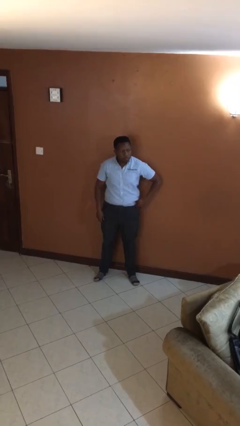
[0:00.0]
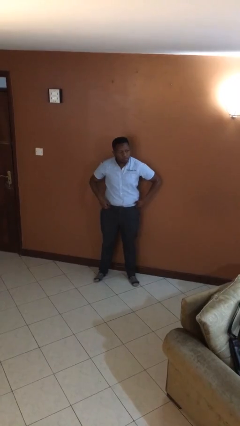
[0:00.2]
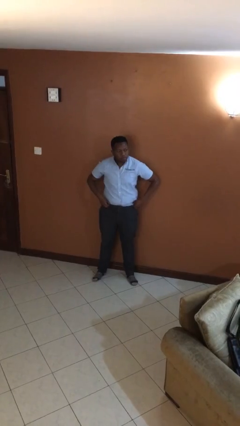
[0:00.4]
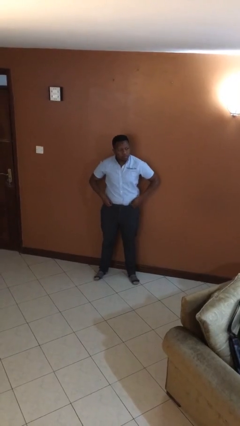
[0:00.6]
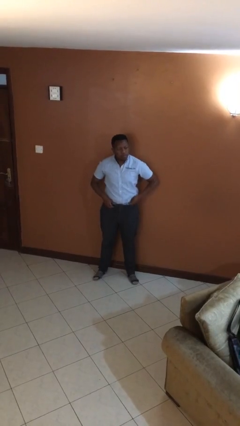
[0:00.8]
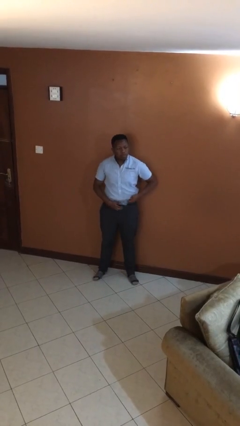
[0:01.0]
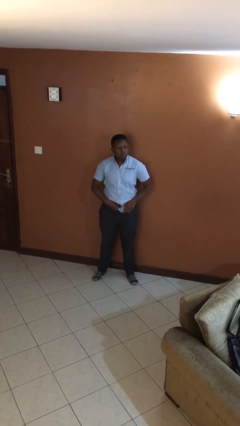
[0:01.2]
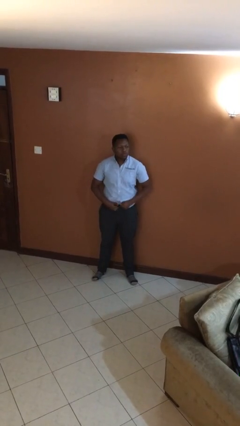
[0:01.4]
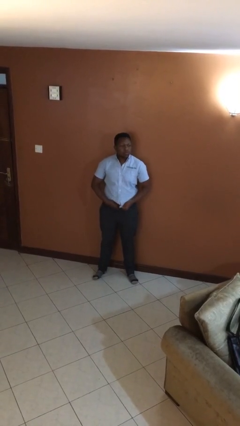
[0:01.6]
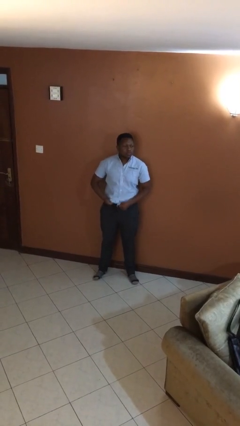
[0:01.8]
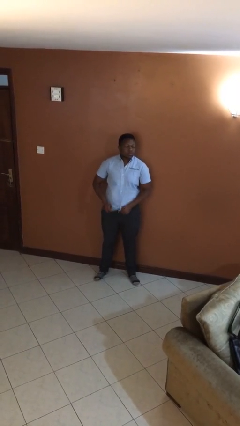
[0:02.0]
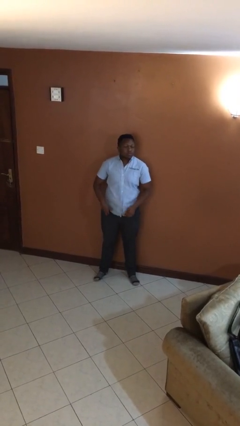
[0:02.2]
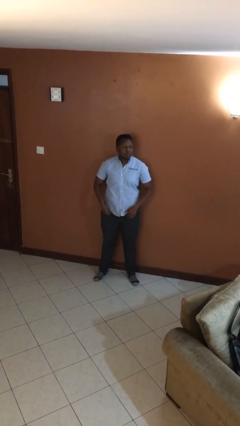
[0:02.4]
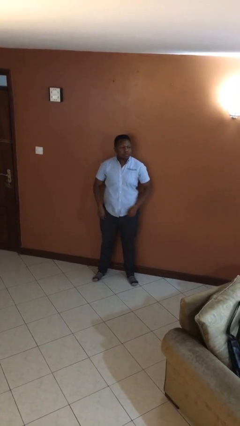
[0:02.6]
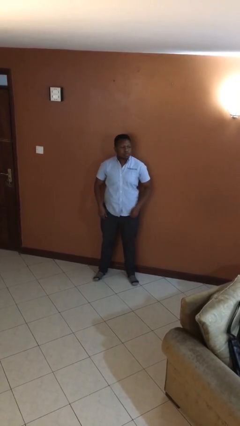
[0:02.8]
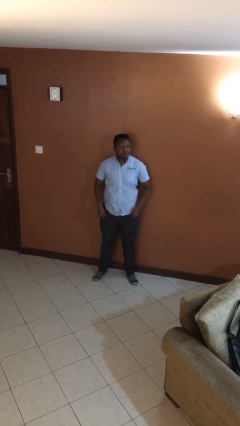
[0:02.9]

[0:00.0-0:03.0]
person untucks shirt

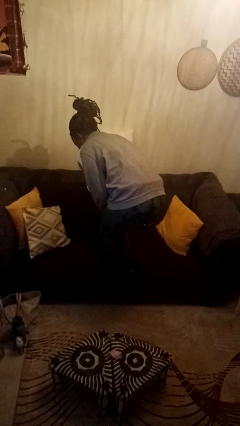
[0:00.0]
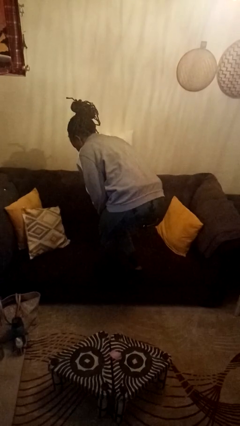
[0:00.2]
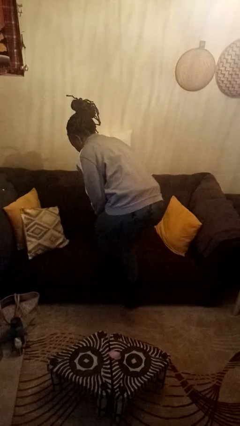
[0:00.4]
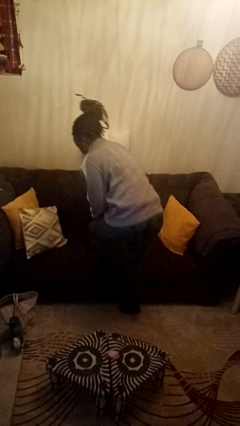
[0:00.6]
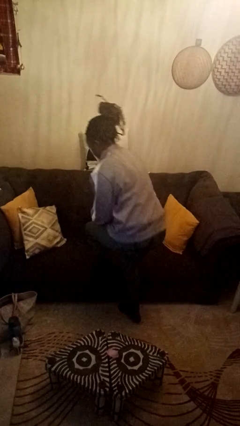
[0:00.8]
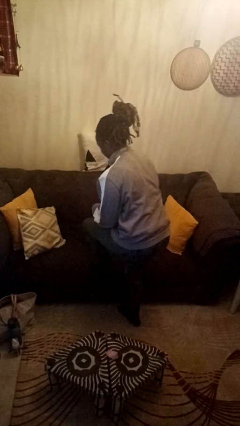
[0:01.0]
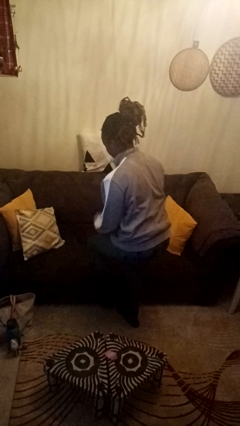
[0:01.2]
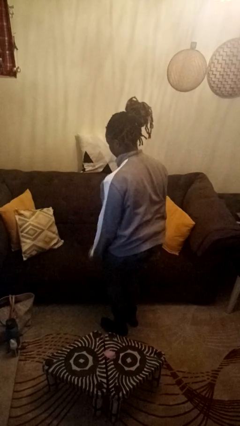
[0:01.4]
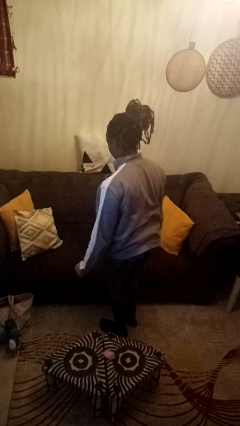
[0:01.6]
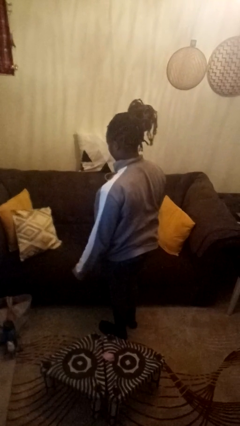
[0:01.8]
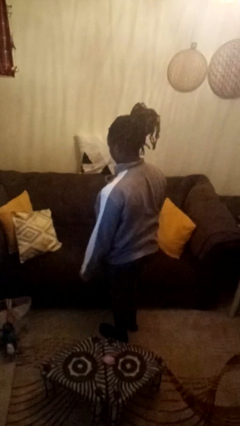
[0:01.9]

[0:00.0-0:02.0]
person climbs off couch

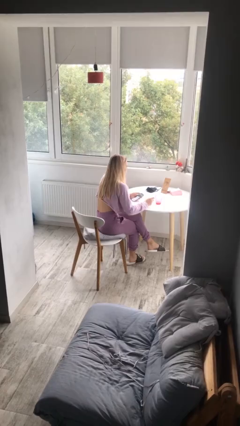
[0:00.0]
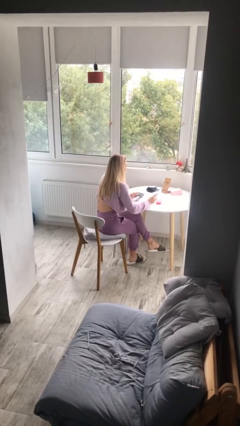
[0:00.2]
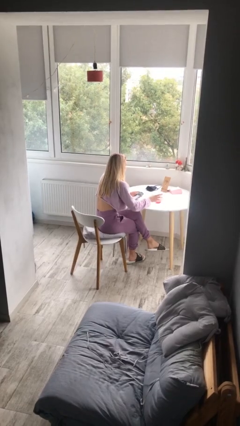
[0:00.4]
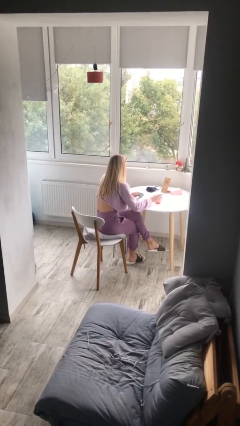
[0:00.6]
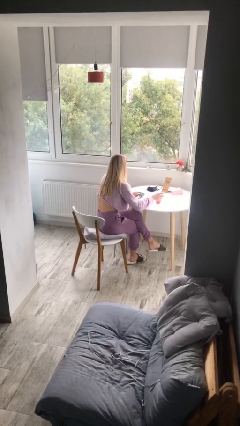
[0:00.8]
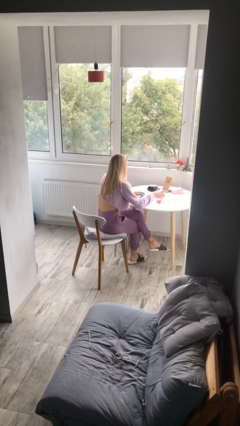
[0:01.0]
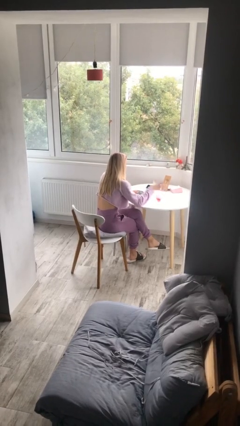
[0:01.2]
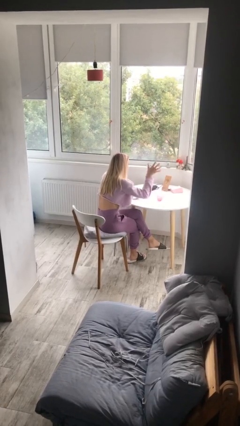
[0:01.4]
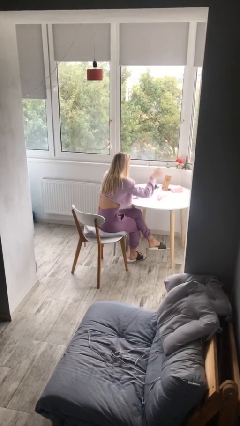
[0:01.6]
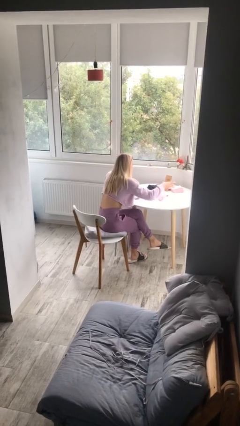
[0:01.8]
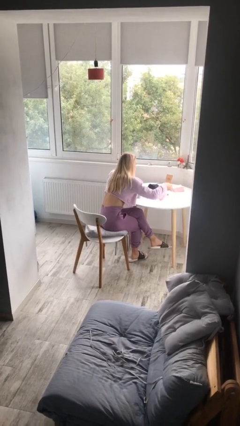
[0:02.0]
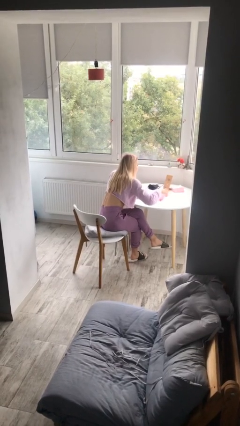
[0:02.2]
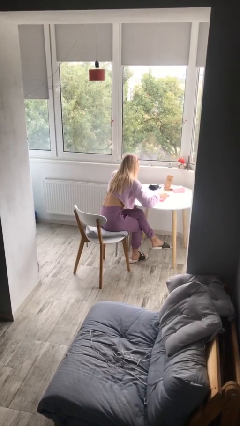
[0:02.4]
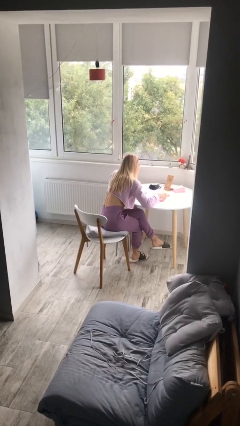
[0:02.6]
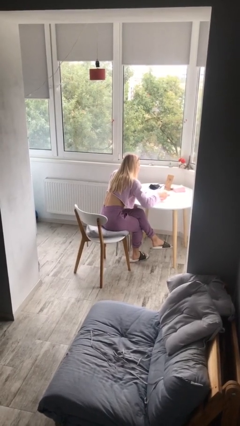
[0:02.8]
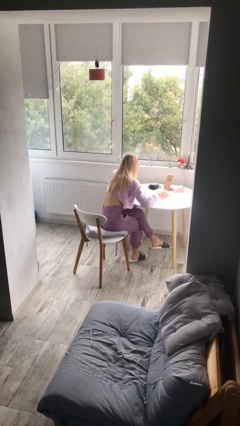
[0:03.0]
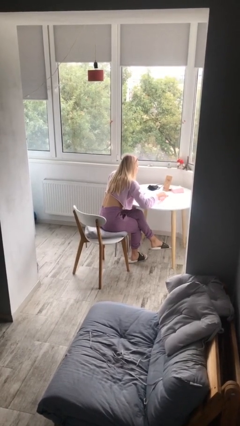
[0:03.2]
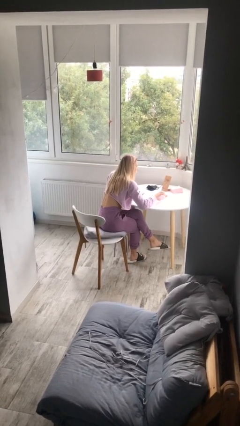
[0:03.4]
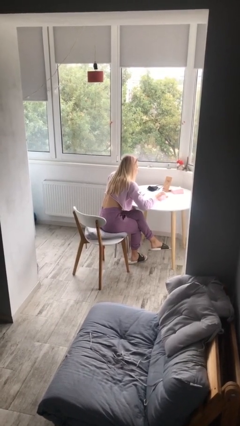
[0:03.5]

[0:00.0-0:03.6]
person spills on table

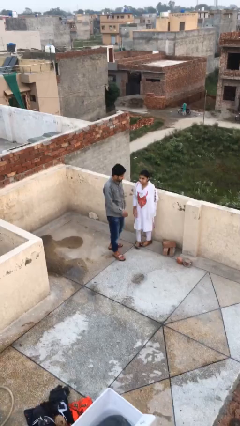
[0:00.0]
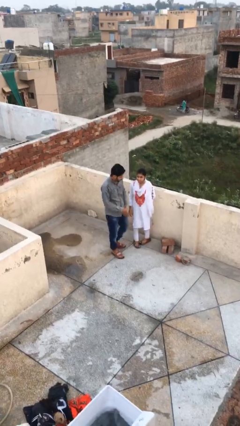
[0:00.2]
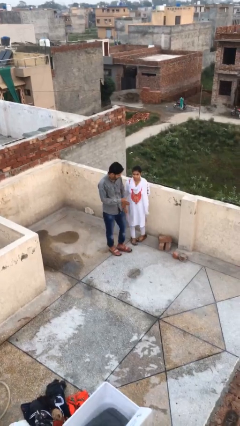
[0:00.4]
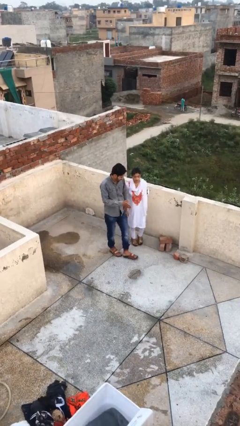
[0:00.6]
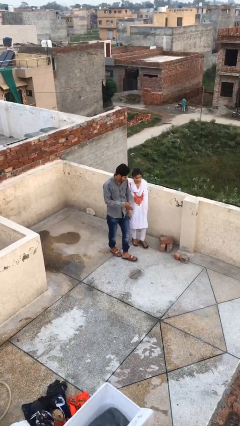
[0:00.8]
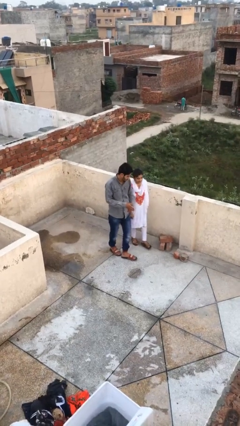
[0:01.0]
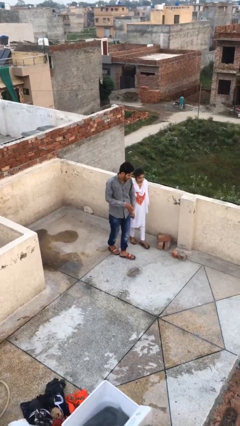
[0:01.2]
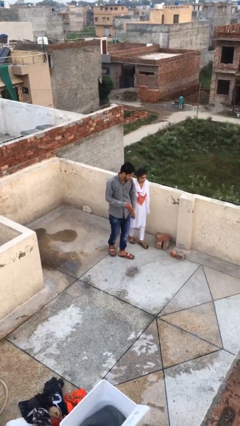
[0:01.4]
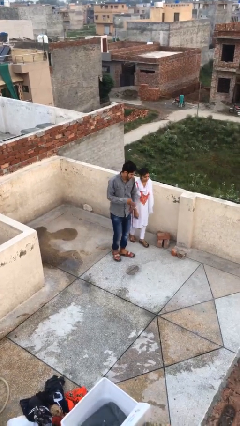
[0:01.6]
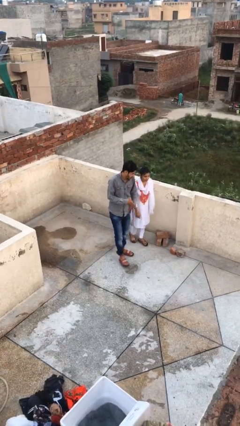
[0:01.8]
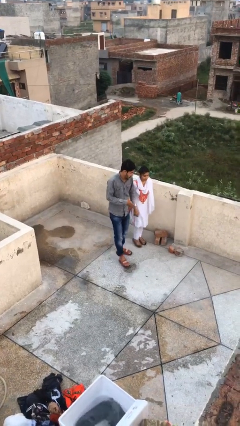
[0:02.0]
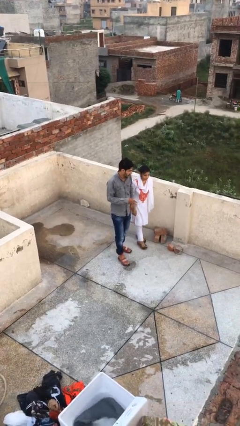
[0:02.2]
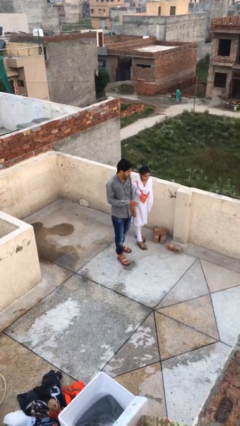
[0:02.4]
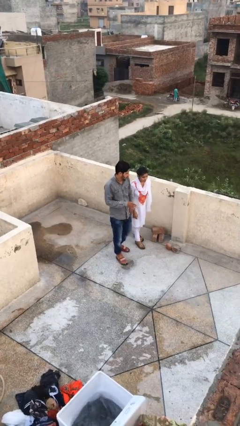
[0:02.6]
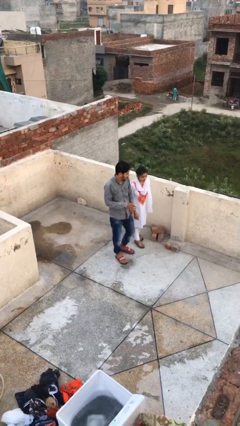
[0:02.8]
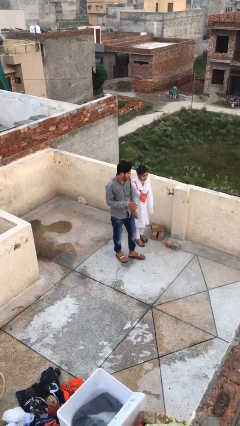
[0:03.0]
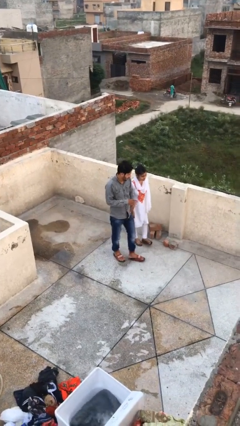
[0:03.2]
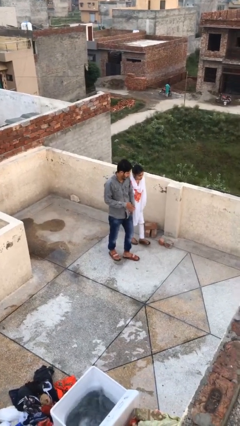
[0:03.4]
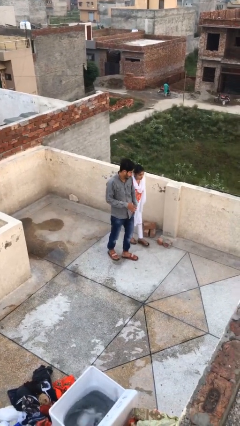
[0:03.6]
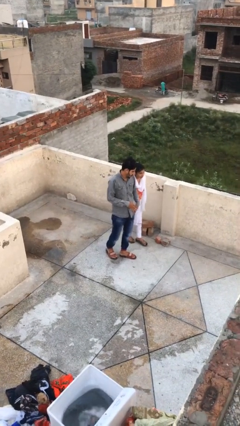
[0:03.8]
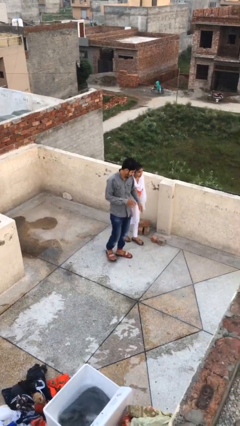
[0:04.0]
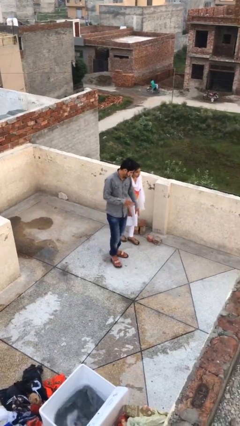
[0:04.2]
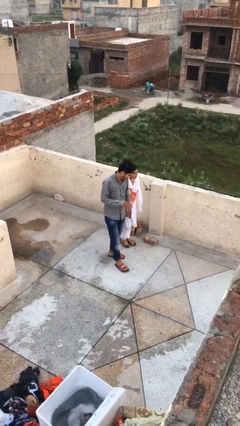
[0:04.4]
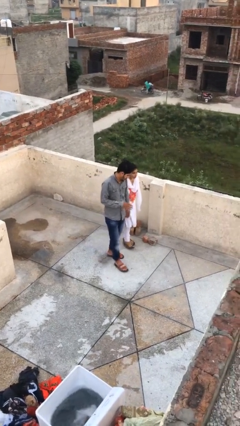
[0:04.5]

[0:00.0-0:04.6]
person talks to person

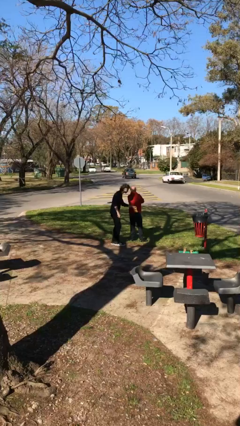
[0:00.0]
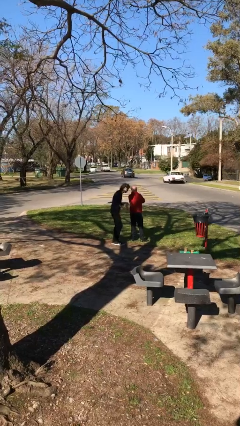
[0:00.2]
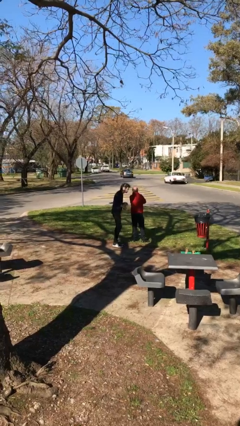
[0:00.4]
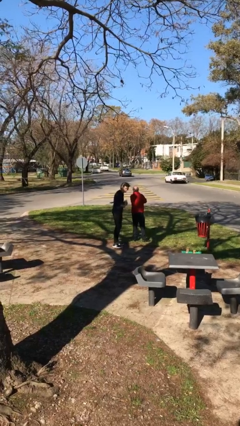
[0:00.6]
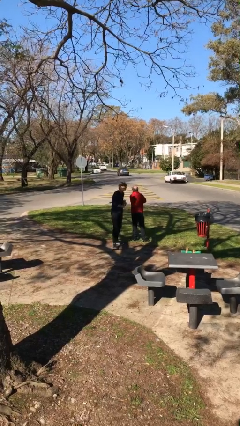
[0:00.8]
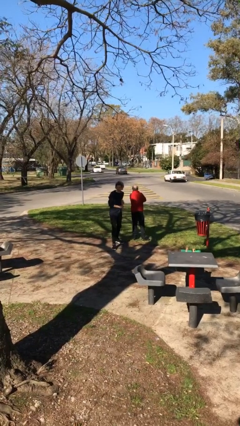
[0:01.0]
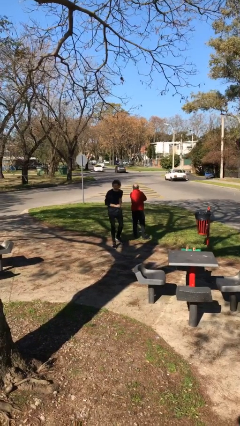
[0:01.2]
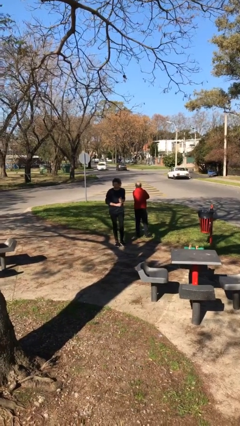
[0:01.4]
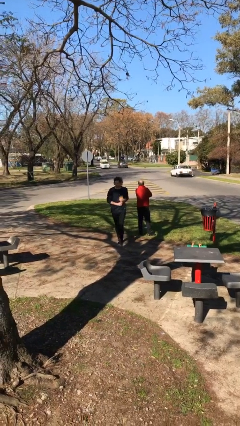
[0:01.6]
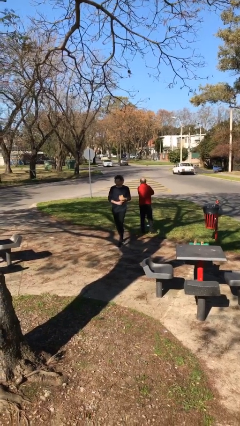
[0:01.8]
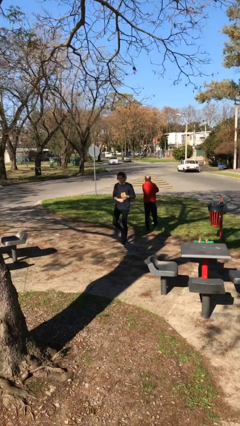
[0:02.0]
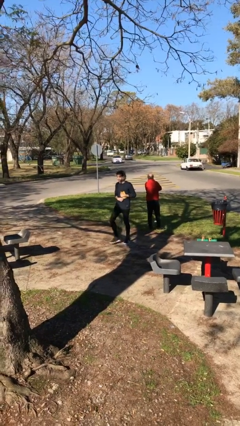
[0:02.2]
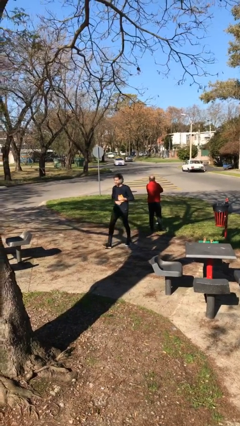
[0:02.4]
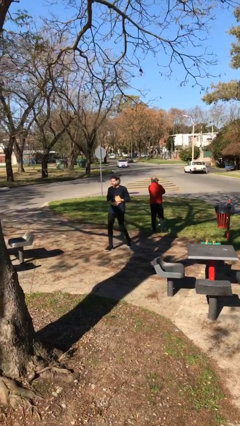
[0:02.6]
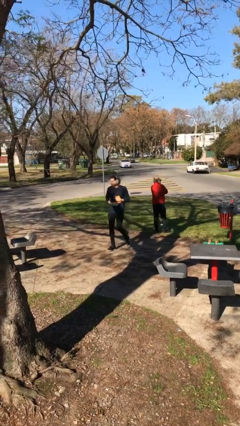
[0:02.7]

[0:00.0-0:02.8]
person steals object from person

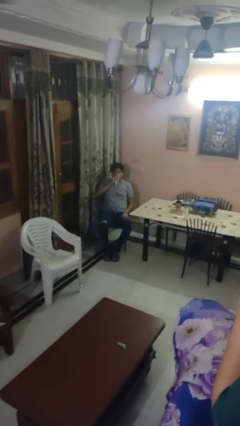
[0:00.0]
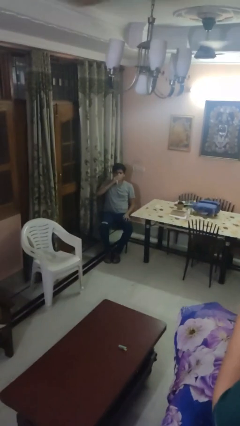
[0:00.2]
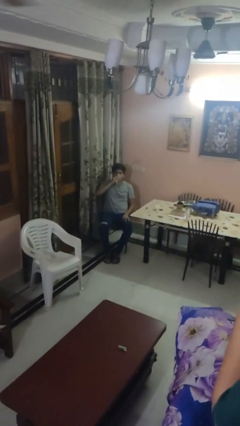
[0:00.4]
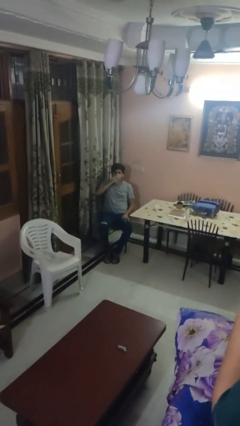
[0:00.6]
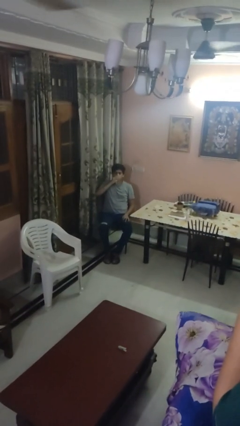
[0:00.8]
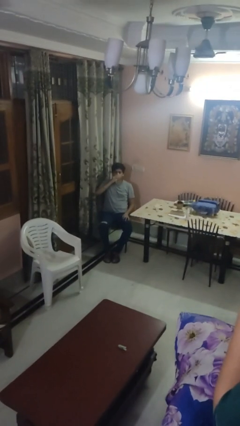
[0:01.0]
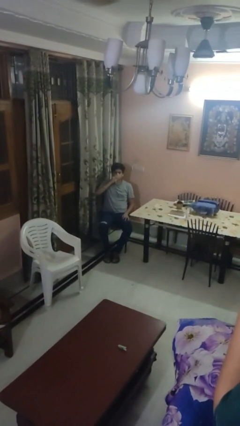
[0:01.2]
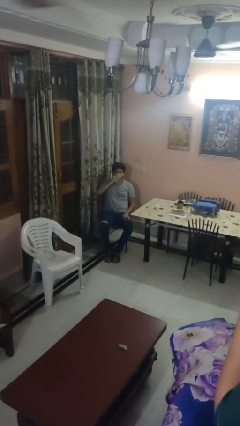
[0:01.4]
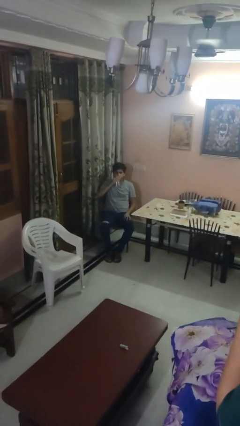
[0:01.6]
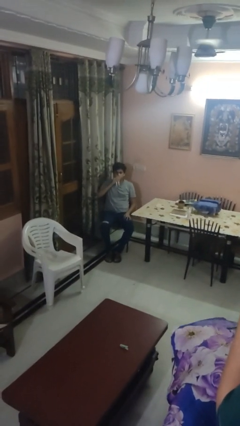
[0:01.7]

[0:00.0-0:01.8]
person drinks from bottle
